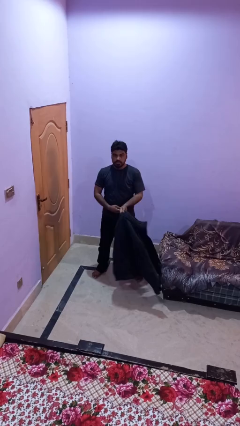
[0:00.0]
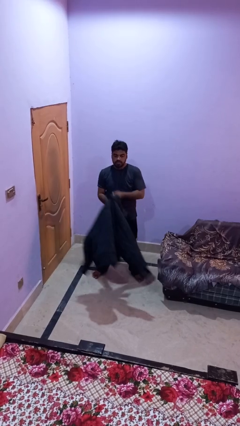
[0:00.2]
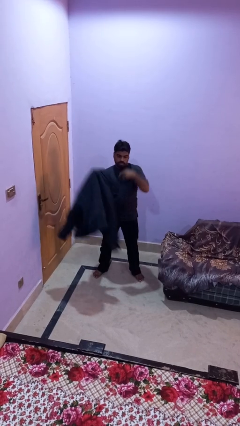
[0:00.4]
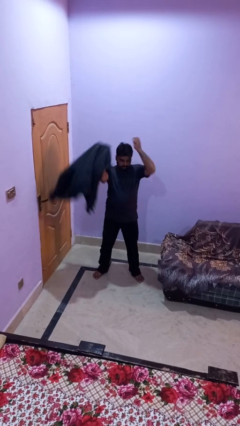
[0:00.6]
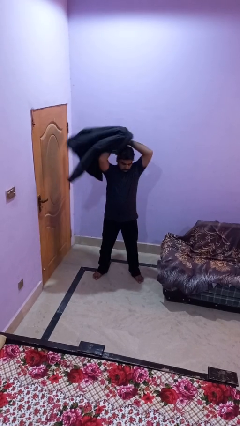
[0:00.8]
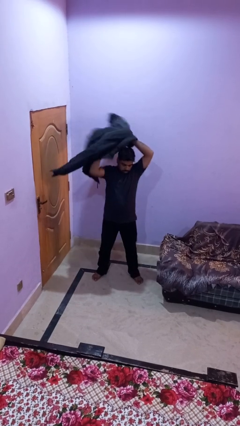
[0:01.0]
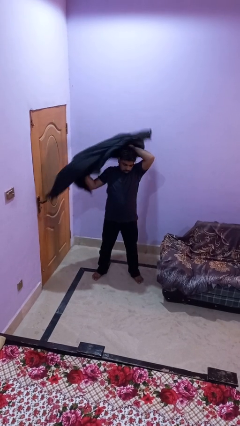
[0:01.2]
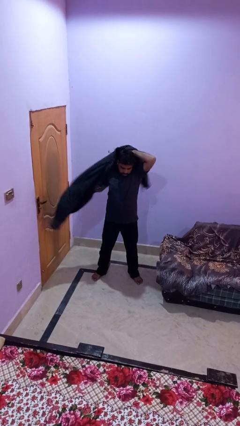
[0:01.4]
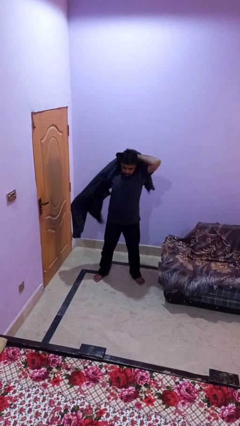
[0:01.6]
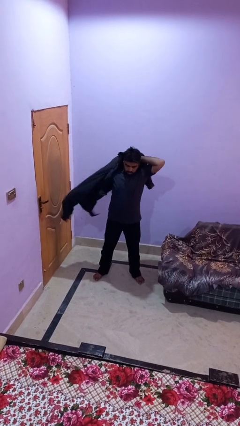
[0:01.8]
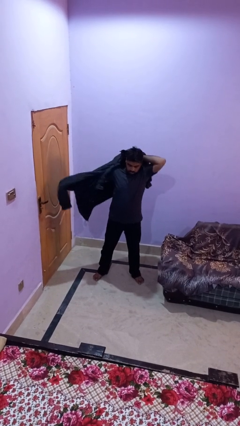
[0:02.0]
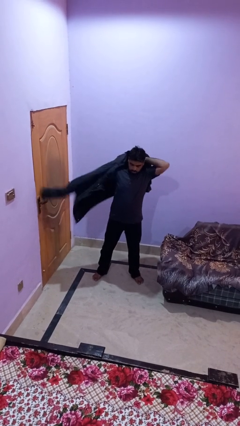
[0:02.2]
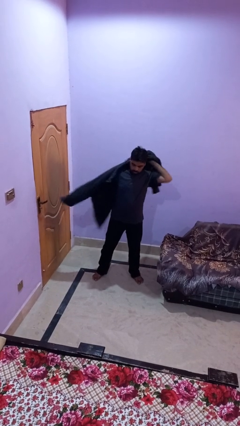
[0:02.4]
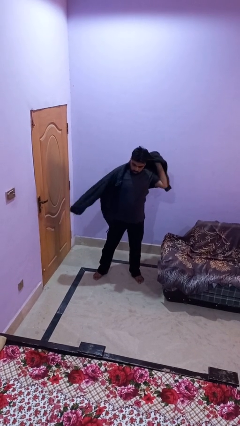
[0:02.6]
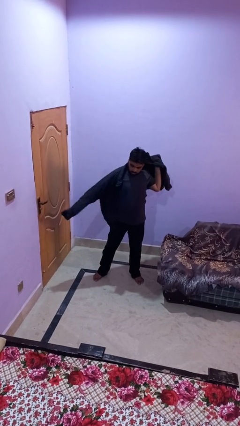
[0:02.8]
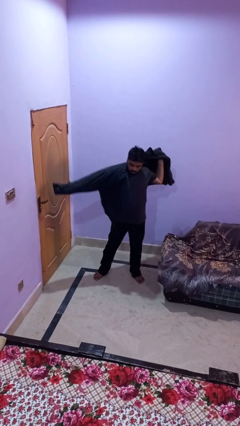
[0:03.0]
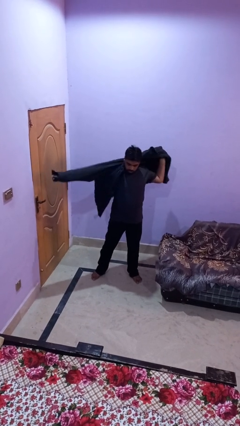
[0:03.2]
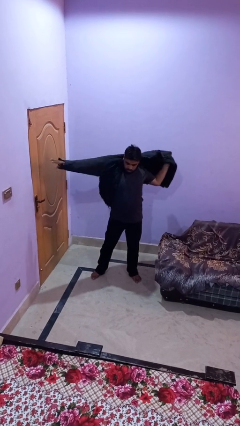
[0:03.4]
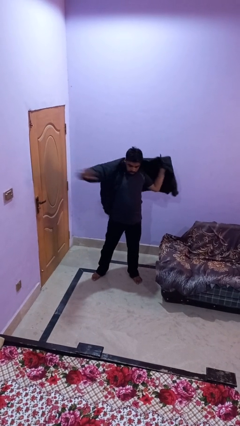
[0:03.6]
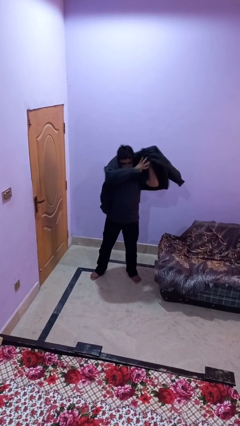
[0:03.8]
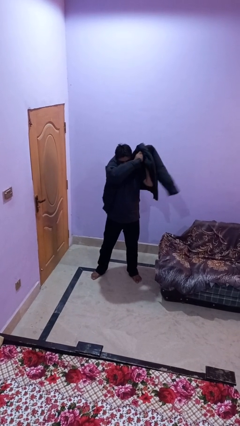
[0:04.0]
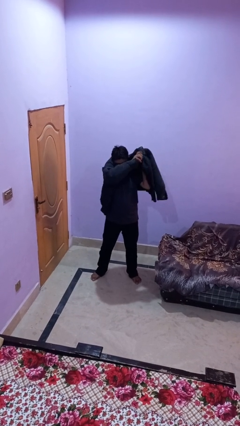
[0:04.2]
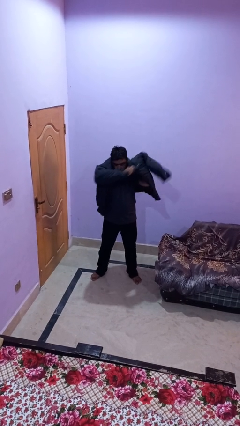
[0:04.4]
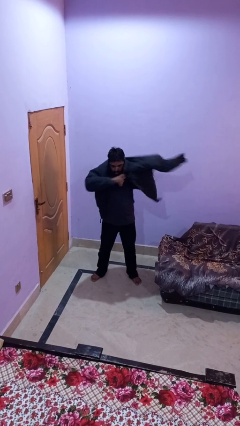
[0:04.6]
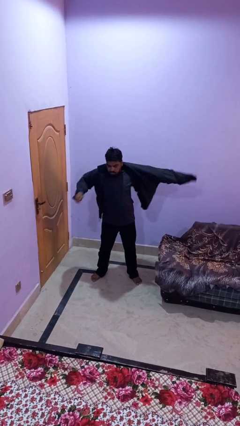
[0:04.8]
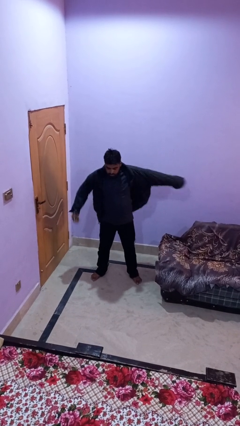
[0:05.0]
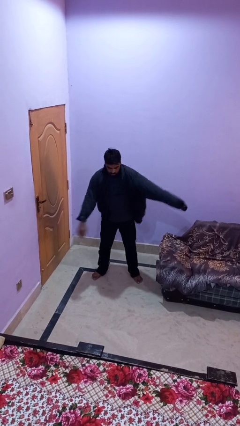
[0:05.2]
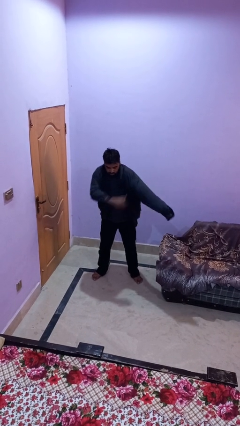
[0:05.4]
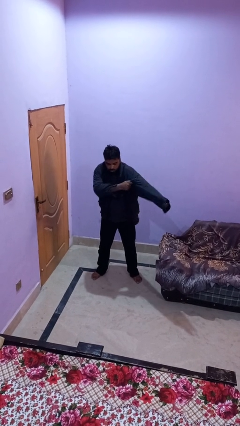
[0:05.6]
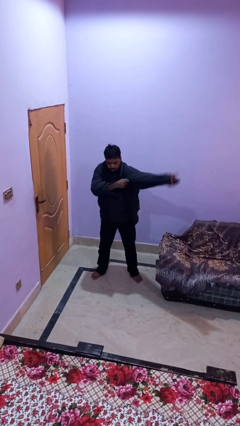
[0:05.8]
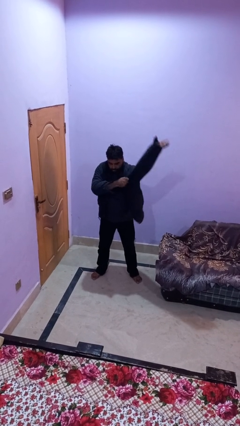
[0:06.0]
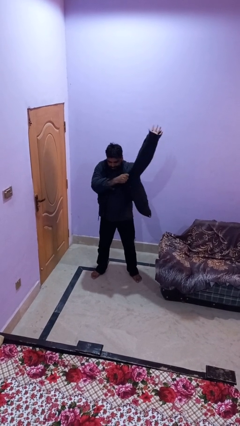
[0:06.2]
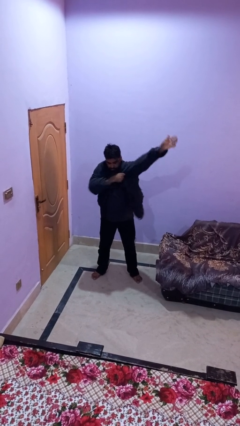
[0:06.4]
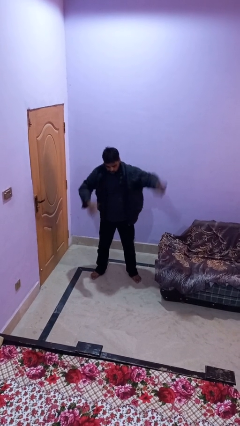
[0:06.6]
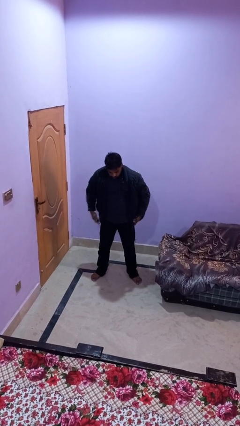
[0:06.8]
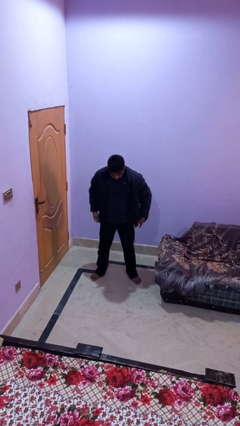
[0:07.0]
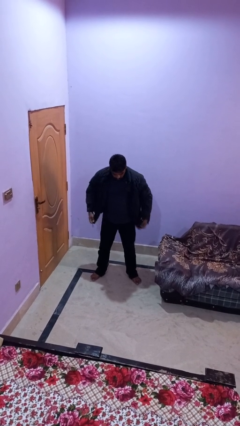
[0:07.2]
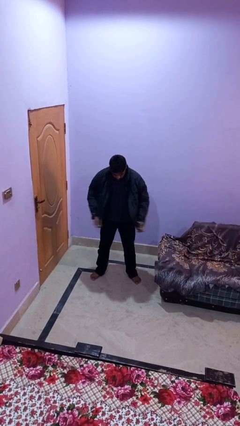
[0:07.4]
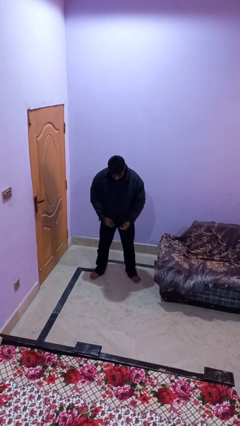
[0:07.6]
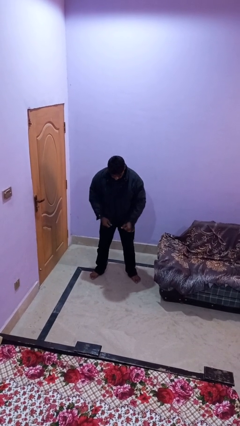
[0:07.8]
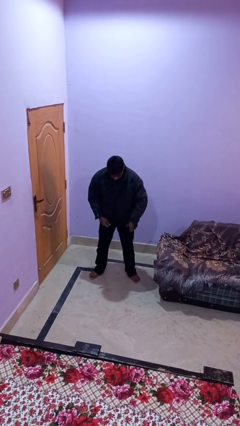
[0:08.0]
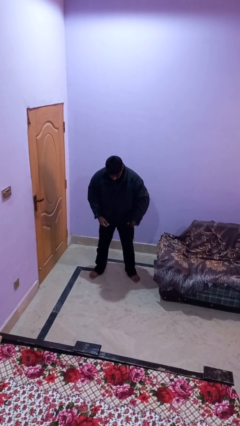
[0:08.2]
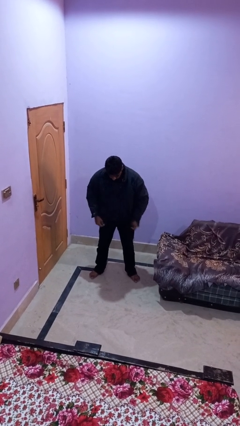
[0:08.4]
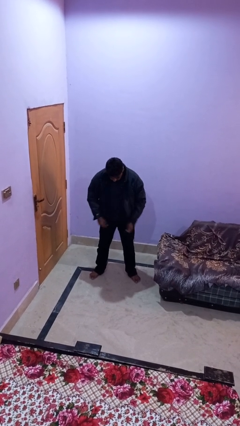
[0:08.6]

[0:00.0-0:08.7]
person puts on jacket

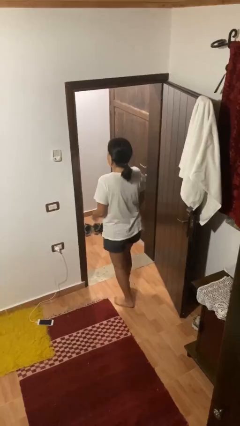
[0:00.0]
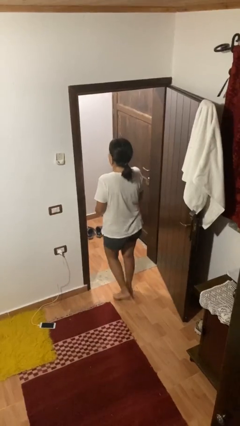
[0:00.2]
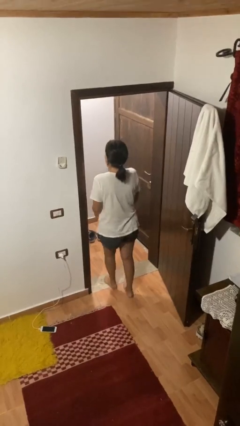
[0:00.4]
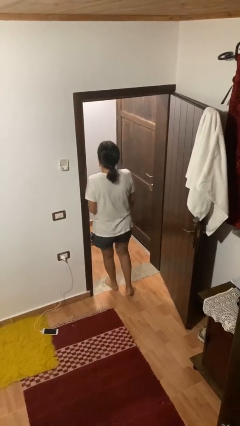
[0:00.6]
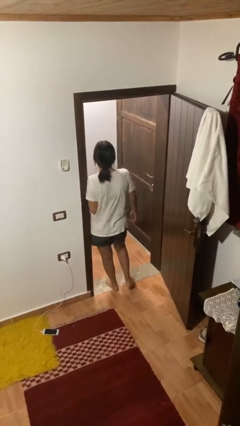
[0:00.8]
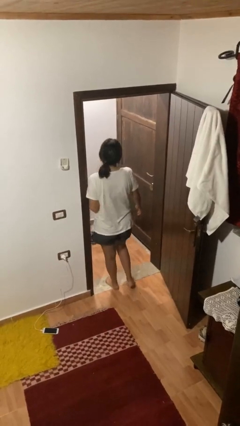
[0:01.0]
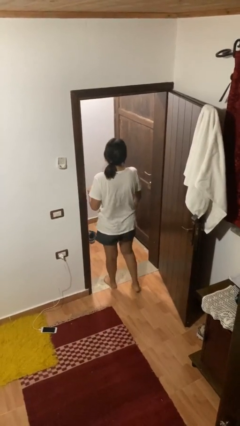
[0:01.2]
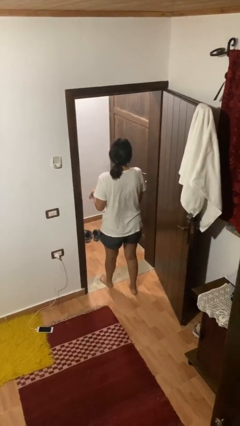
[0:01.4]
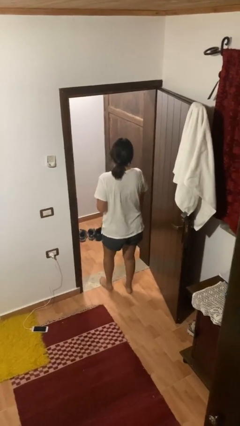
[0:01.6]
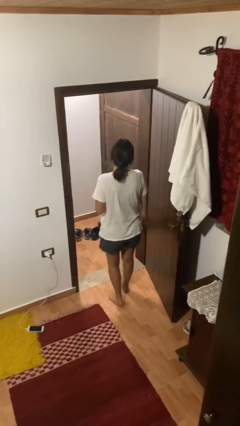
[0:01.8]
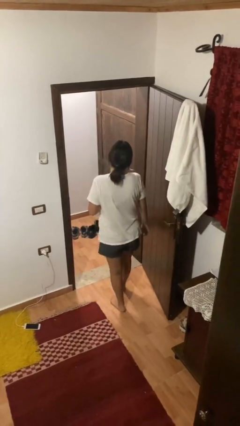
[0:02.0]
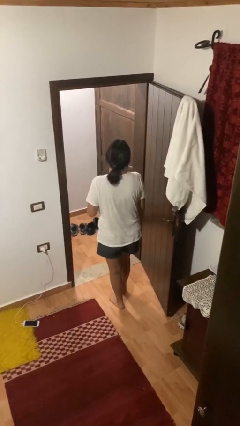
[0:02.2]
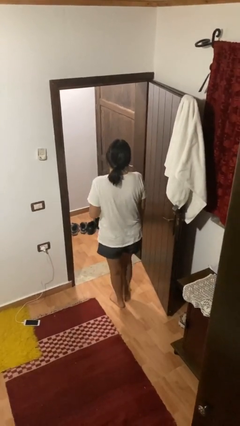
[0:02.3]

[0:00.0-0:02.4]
person bumps into wall

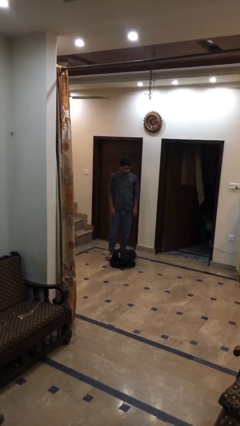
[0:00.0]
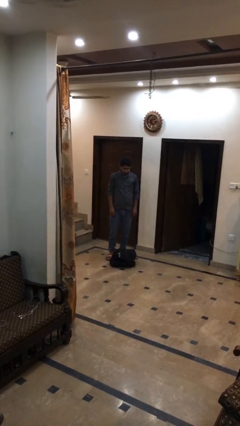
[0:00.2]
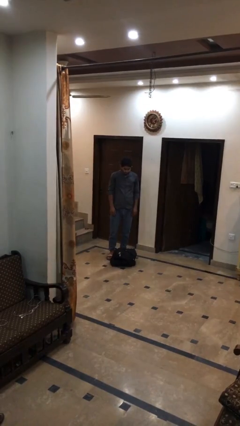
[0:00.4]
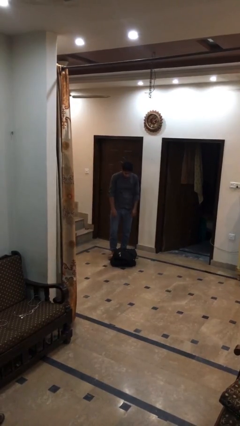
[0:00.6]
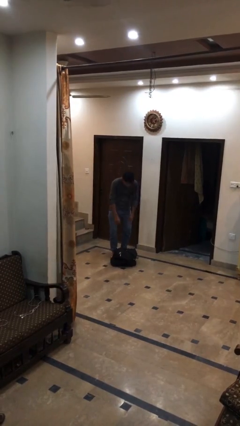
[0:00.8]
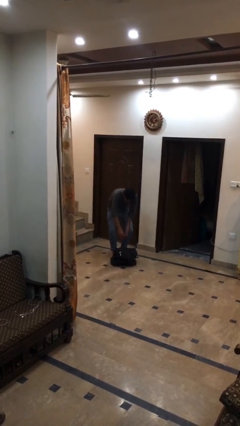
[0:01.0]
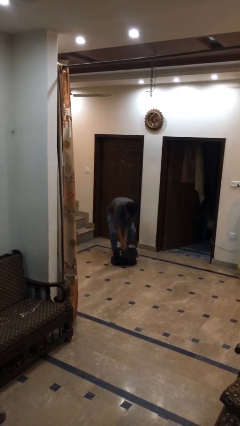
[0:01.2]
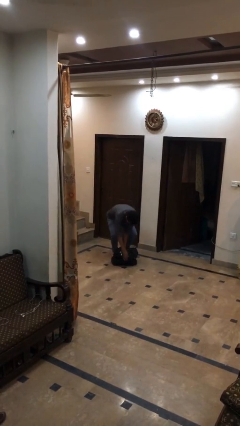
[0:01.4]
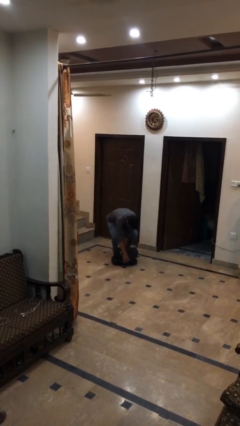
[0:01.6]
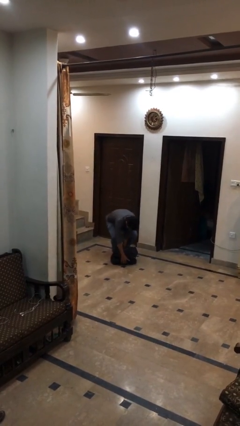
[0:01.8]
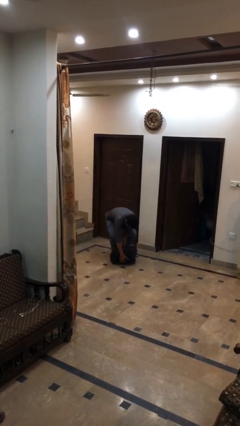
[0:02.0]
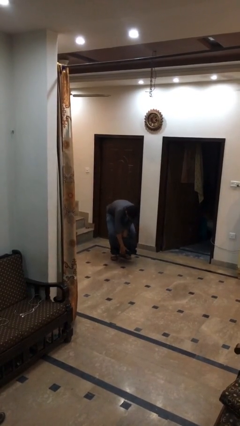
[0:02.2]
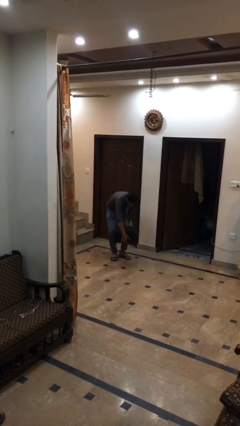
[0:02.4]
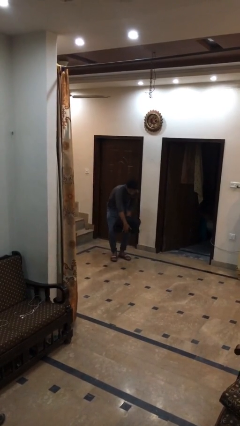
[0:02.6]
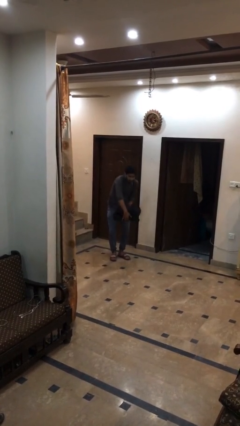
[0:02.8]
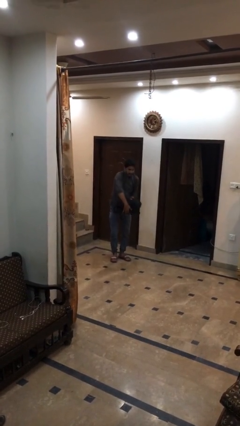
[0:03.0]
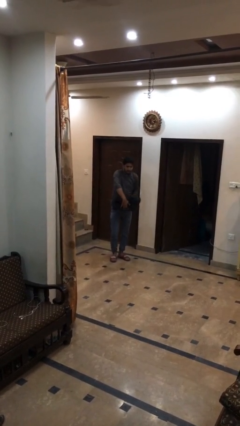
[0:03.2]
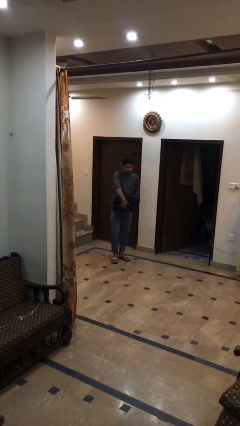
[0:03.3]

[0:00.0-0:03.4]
person picks up object from floor

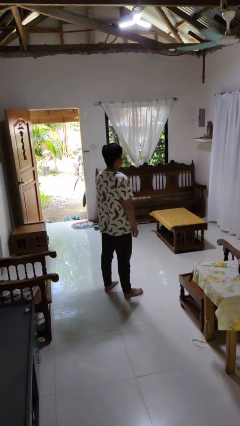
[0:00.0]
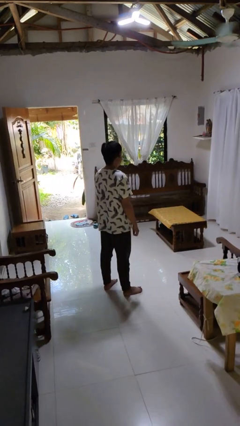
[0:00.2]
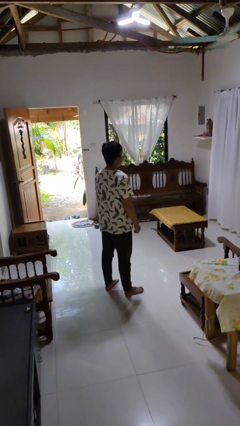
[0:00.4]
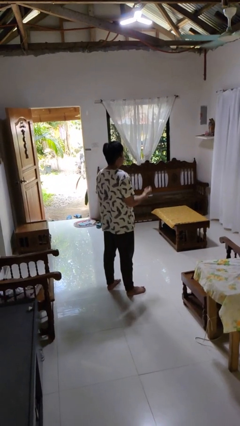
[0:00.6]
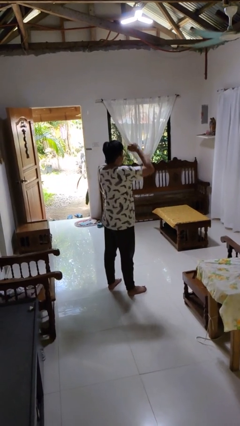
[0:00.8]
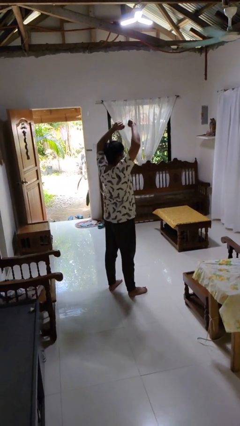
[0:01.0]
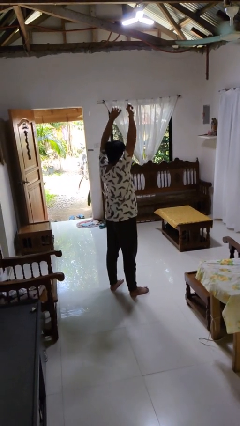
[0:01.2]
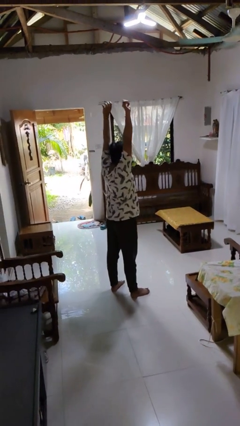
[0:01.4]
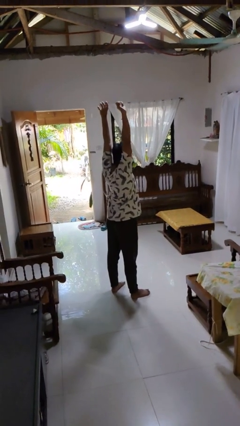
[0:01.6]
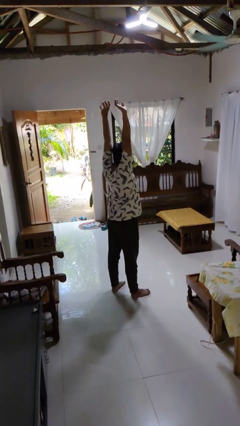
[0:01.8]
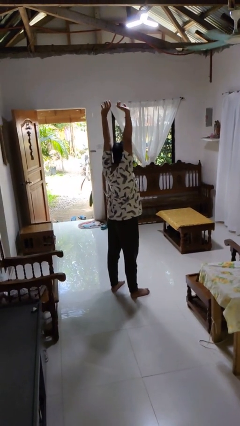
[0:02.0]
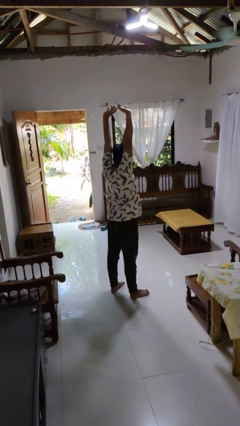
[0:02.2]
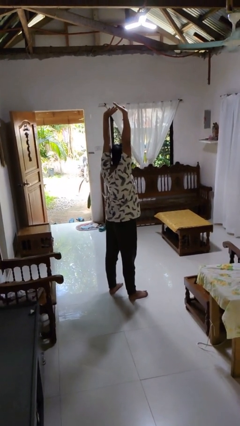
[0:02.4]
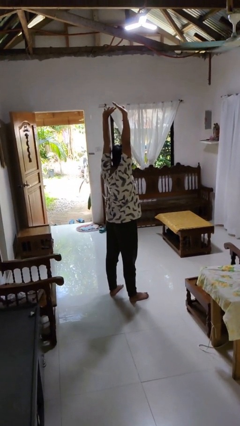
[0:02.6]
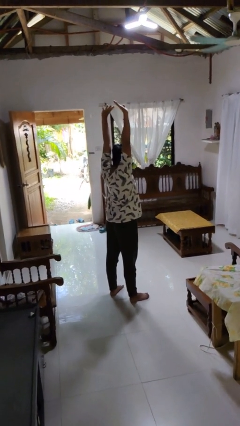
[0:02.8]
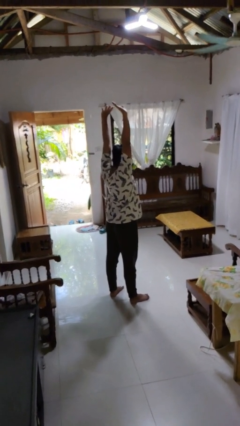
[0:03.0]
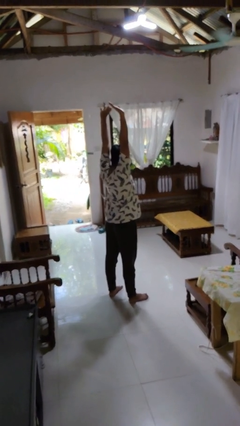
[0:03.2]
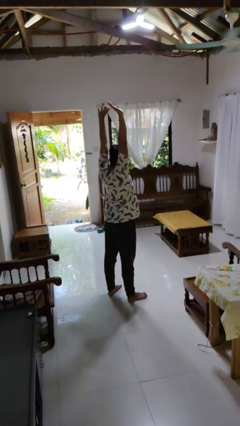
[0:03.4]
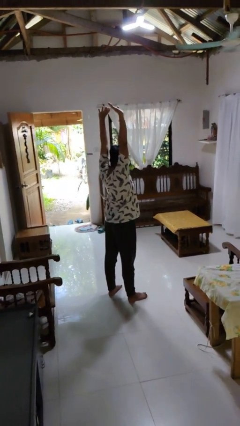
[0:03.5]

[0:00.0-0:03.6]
person stretches arms over head
